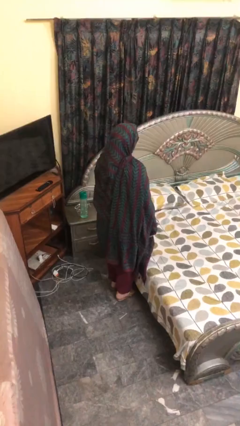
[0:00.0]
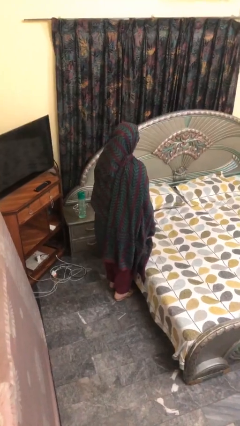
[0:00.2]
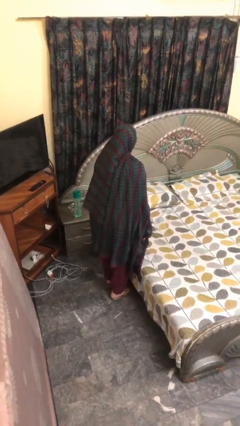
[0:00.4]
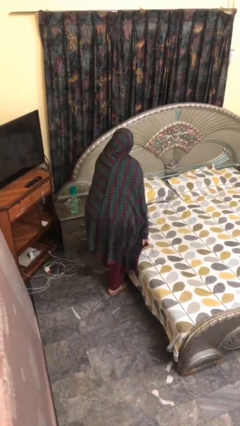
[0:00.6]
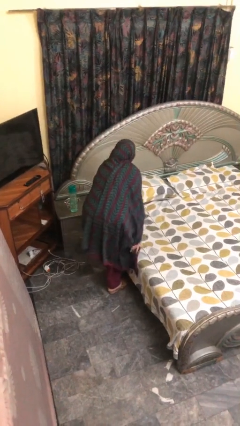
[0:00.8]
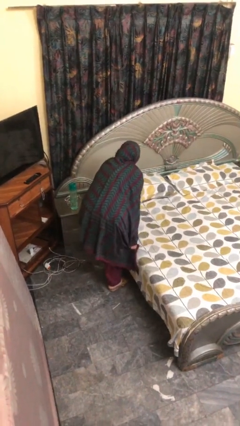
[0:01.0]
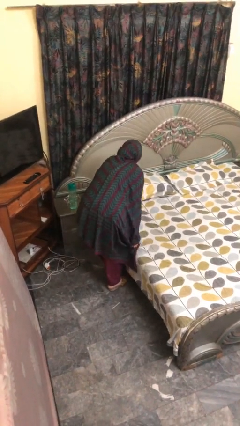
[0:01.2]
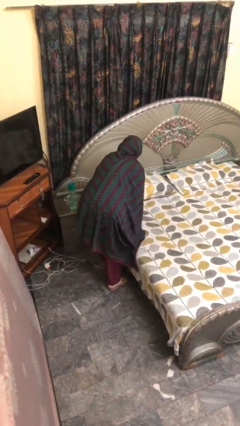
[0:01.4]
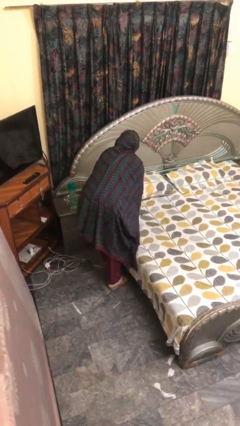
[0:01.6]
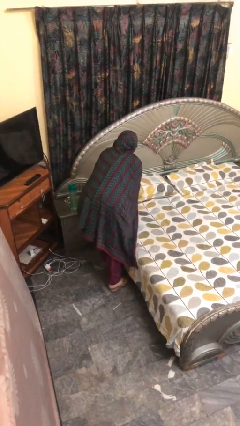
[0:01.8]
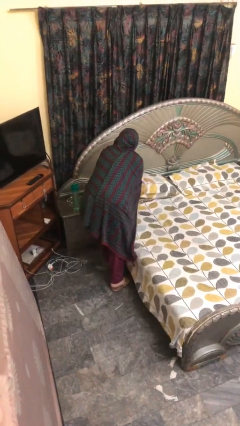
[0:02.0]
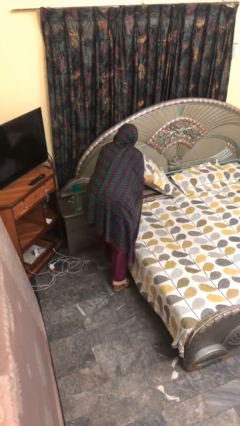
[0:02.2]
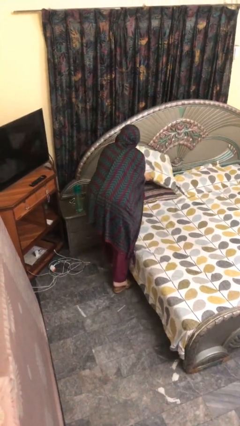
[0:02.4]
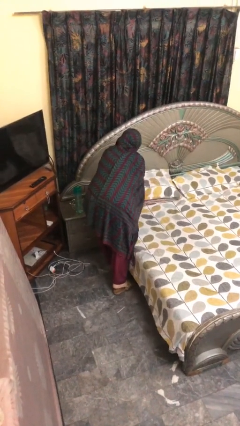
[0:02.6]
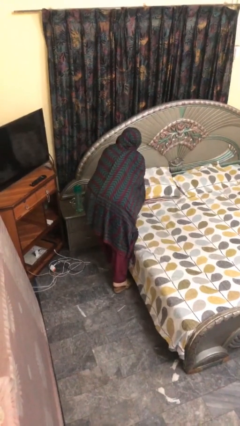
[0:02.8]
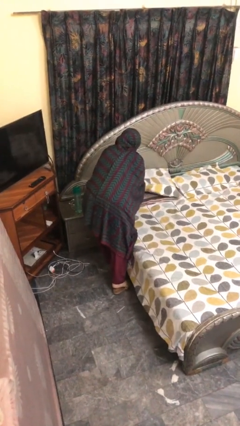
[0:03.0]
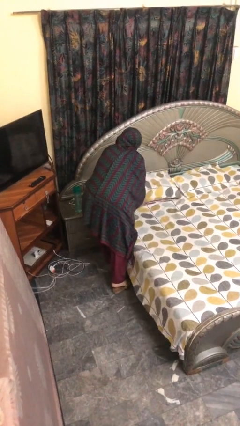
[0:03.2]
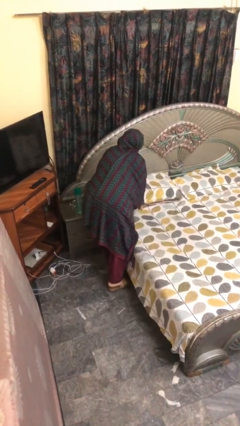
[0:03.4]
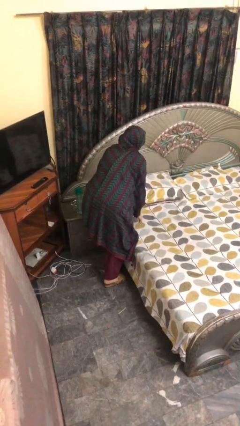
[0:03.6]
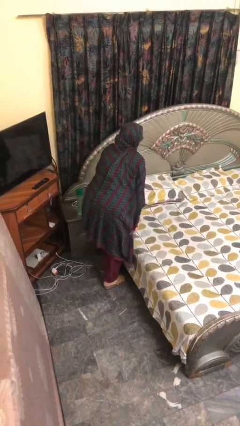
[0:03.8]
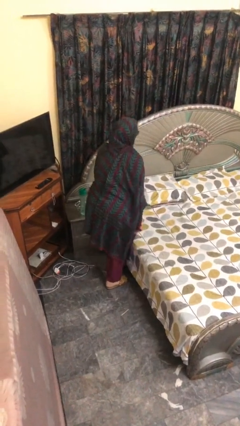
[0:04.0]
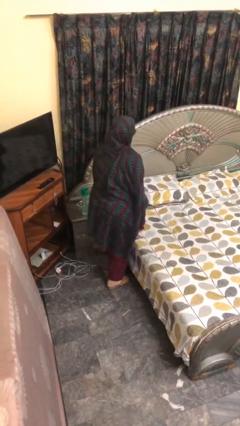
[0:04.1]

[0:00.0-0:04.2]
person makes bed

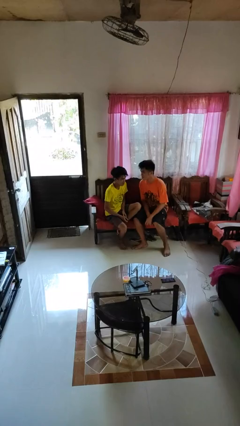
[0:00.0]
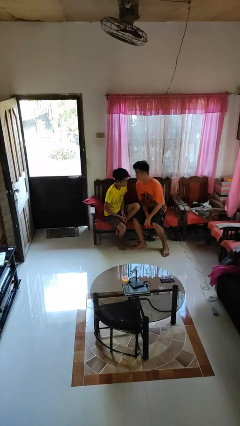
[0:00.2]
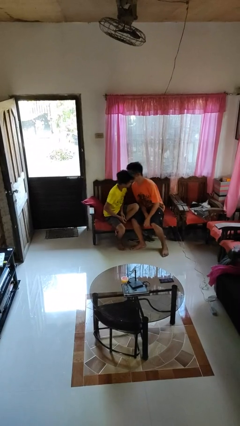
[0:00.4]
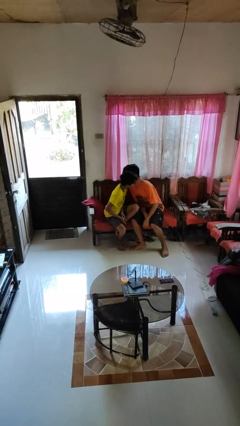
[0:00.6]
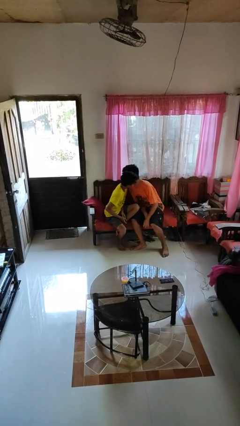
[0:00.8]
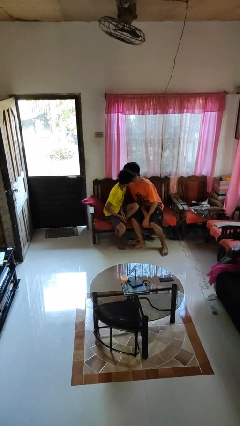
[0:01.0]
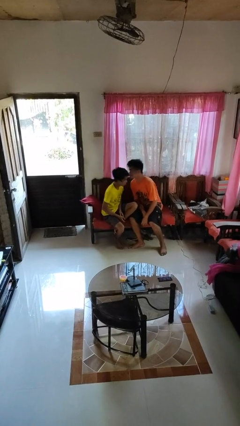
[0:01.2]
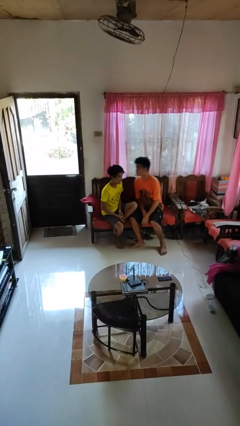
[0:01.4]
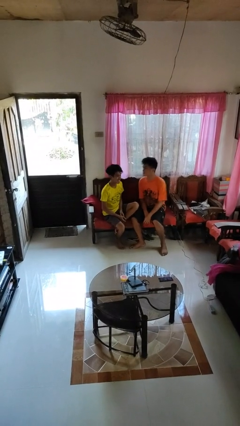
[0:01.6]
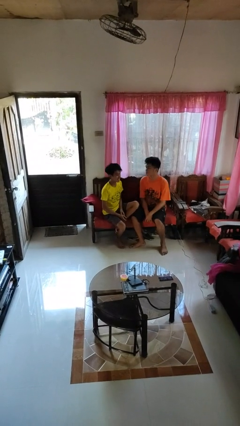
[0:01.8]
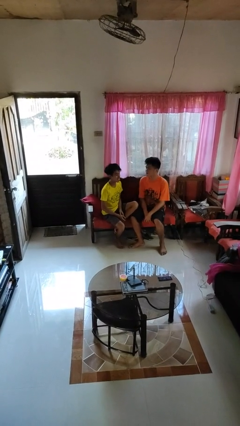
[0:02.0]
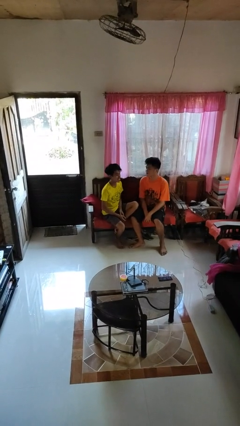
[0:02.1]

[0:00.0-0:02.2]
person kisses cheek of person

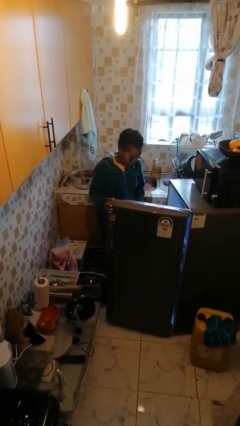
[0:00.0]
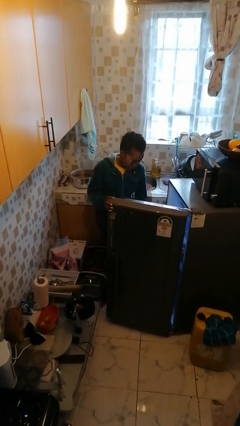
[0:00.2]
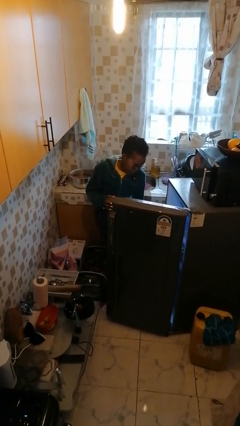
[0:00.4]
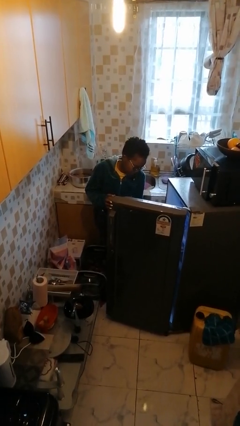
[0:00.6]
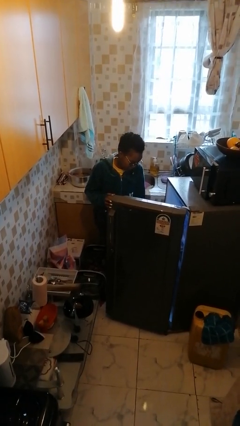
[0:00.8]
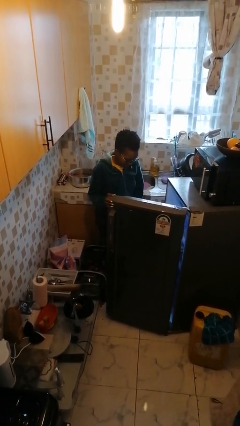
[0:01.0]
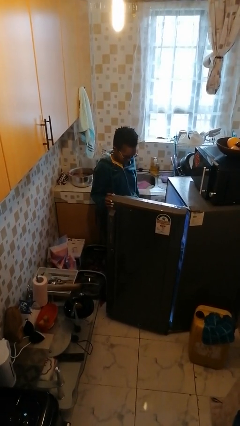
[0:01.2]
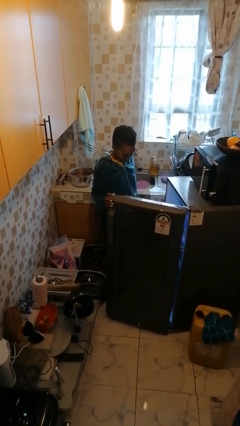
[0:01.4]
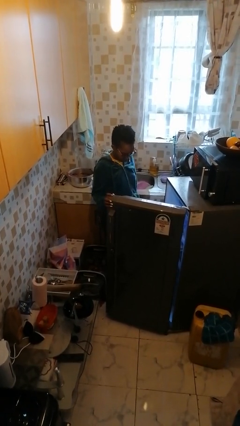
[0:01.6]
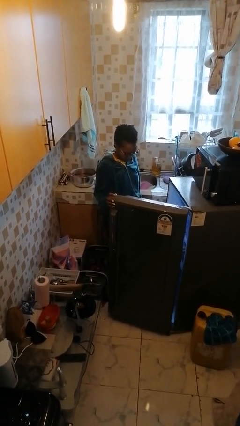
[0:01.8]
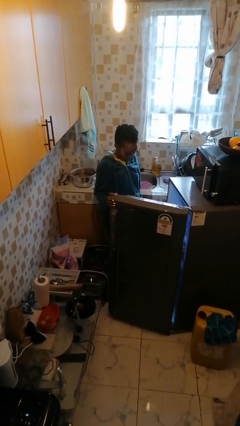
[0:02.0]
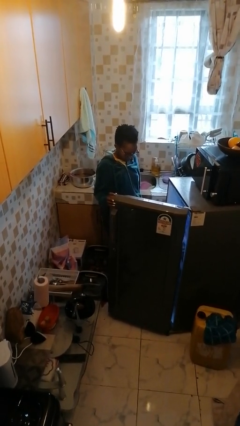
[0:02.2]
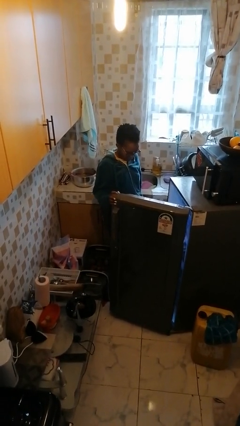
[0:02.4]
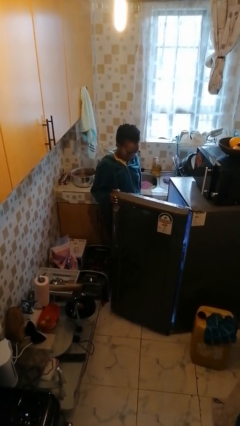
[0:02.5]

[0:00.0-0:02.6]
person puts object into refrigerator

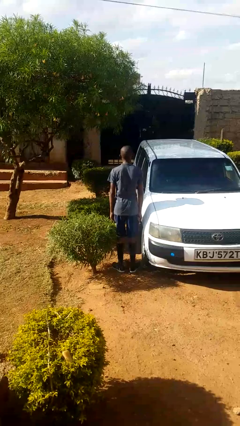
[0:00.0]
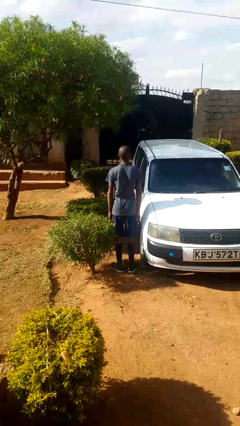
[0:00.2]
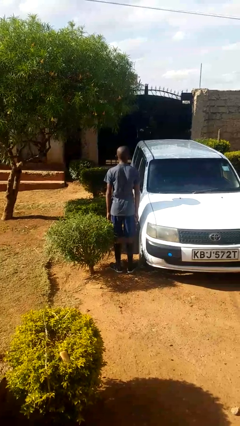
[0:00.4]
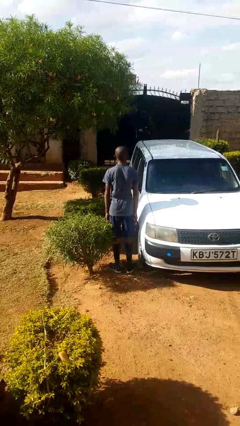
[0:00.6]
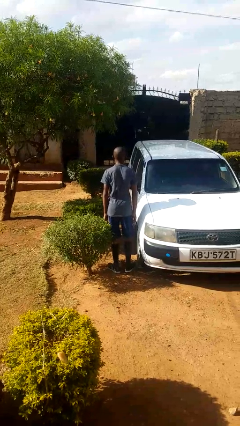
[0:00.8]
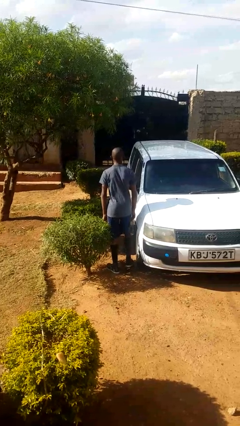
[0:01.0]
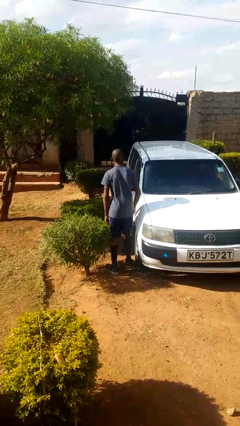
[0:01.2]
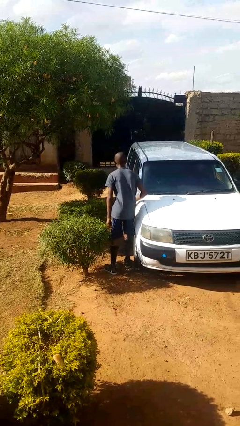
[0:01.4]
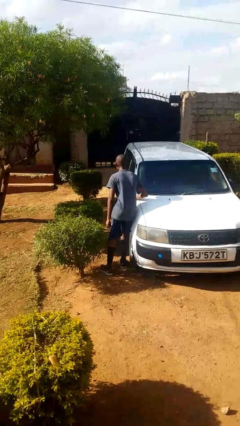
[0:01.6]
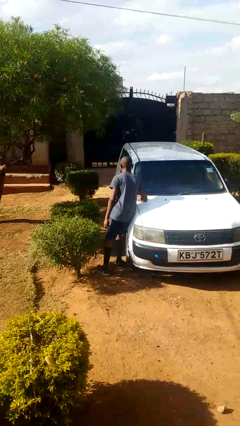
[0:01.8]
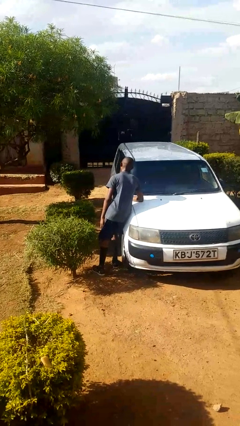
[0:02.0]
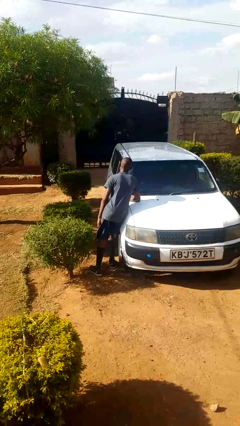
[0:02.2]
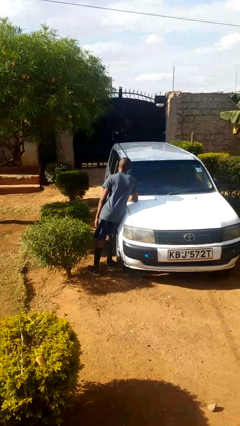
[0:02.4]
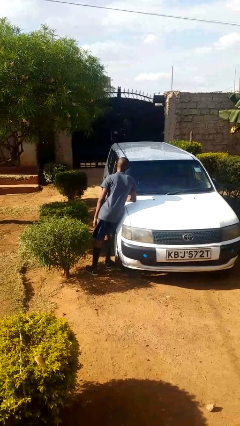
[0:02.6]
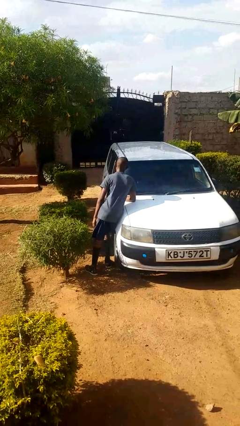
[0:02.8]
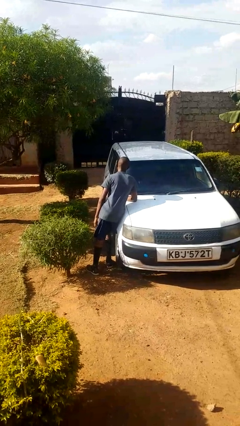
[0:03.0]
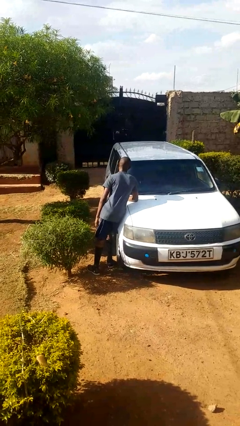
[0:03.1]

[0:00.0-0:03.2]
person leans against car

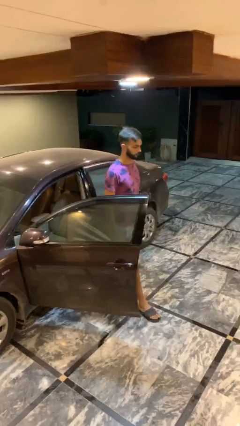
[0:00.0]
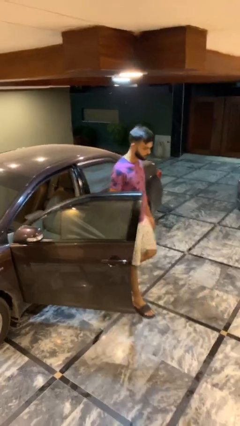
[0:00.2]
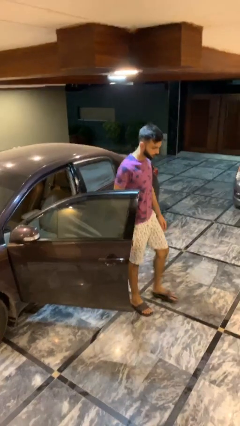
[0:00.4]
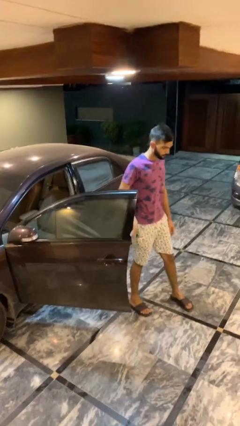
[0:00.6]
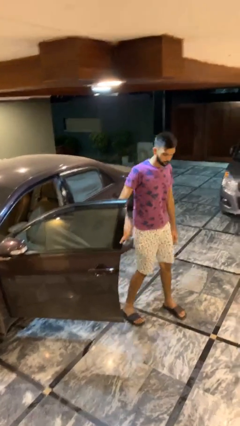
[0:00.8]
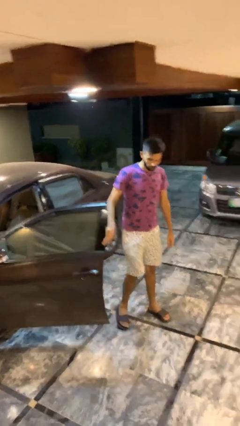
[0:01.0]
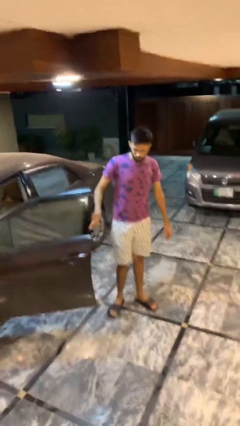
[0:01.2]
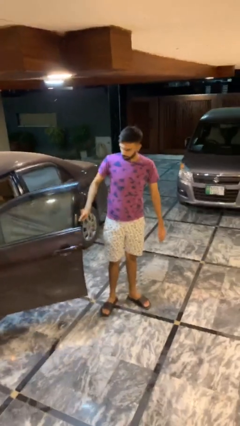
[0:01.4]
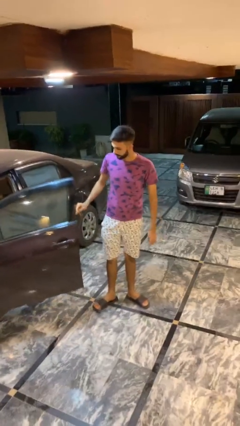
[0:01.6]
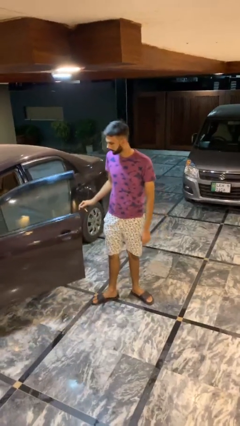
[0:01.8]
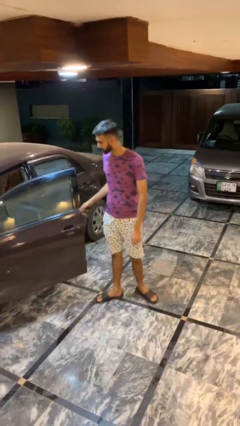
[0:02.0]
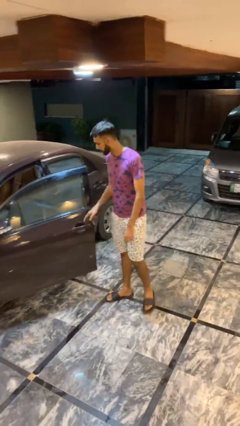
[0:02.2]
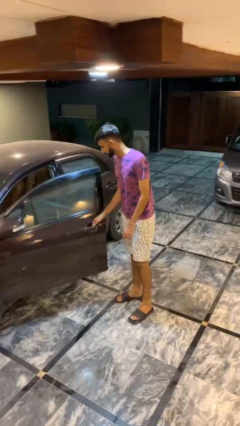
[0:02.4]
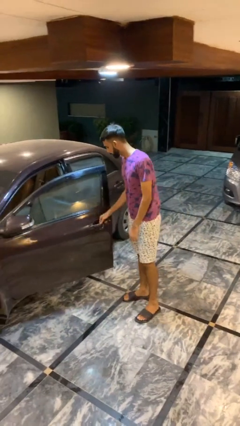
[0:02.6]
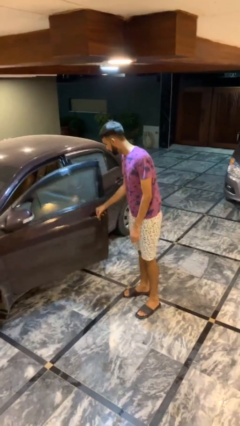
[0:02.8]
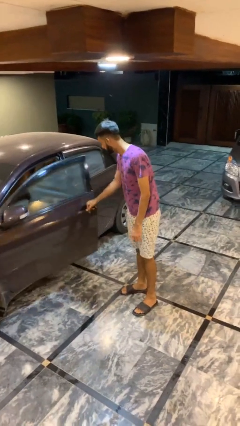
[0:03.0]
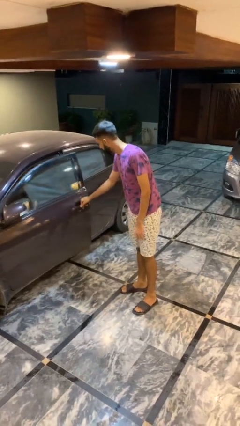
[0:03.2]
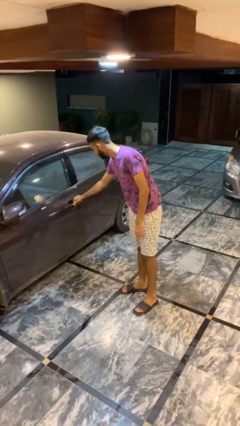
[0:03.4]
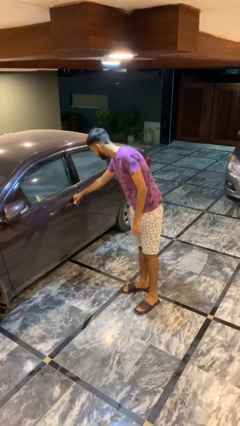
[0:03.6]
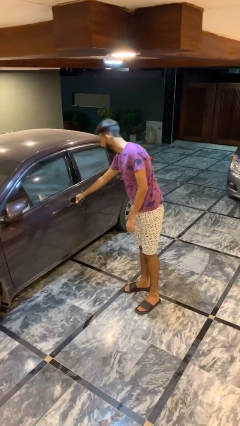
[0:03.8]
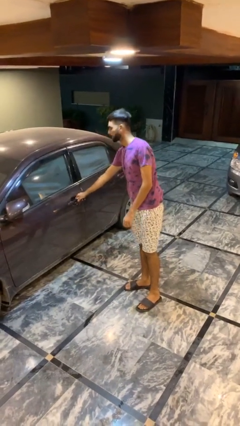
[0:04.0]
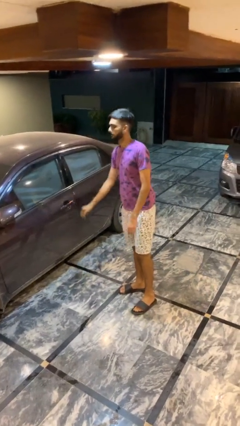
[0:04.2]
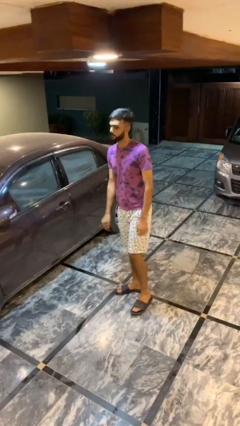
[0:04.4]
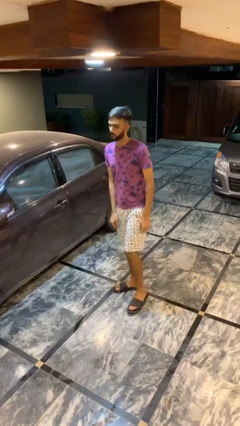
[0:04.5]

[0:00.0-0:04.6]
person closes car door

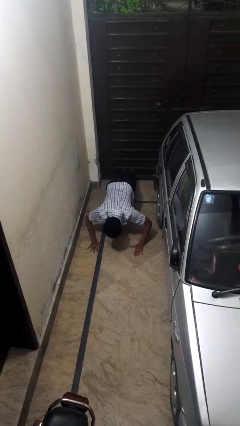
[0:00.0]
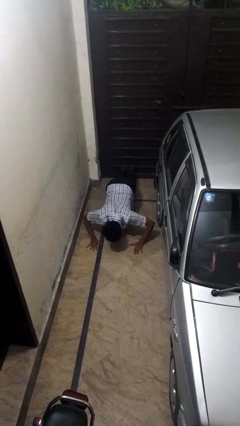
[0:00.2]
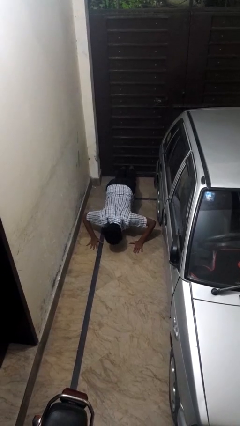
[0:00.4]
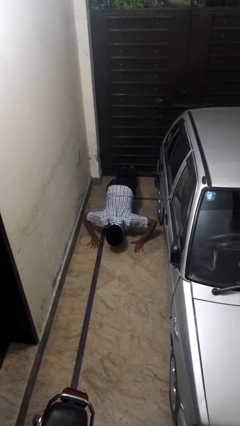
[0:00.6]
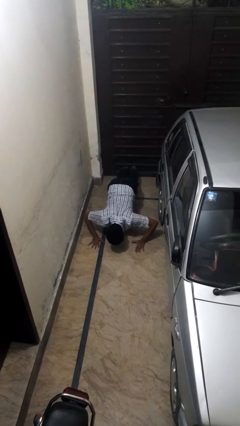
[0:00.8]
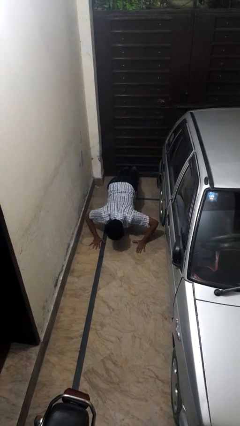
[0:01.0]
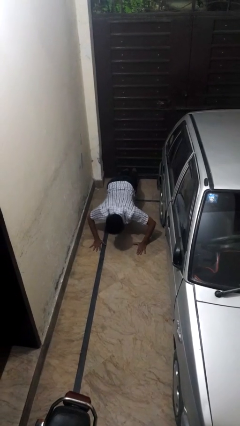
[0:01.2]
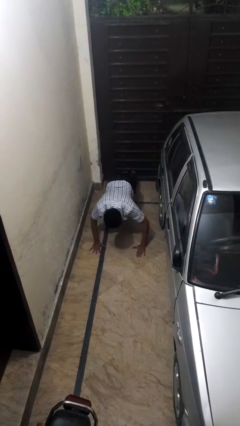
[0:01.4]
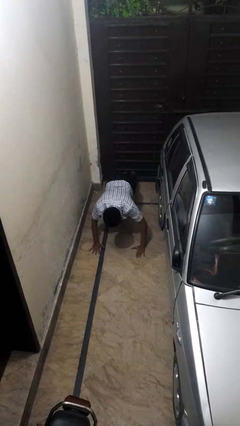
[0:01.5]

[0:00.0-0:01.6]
person exercises with pushup
